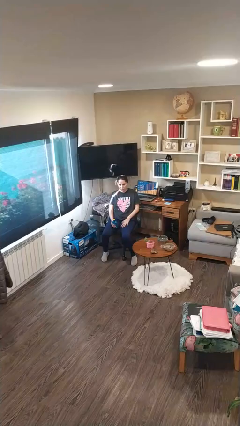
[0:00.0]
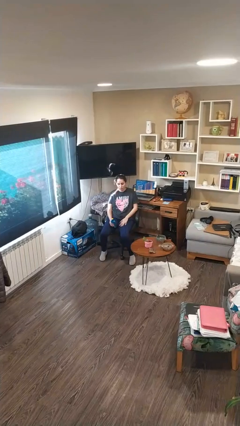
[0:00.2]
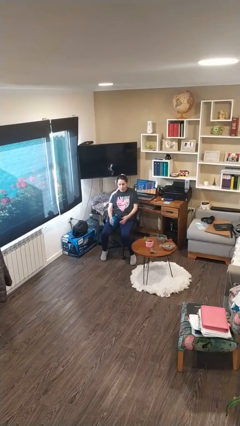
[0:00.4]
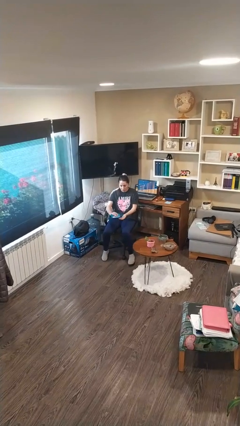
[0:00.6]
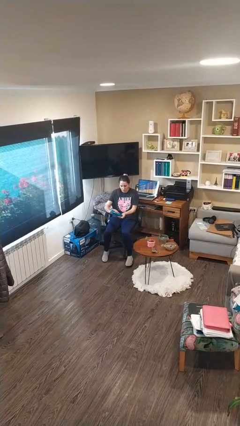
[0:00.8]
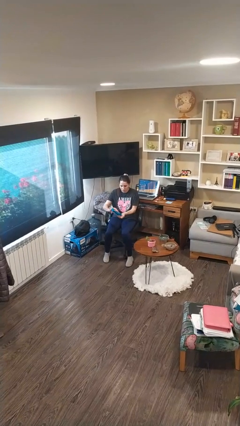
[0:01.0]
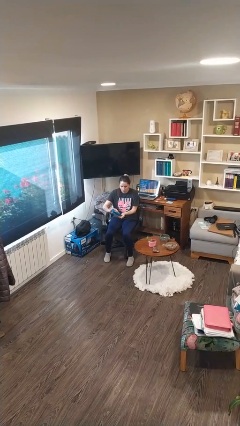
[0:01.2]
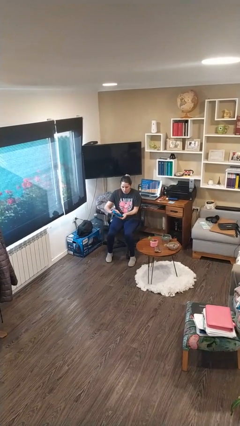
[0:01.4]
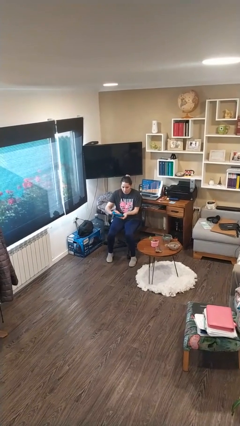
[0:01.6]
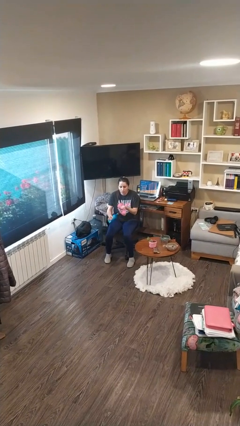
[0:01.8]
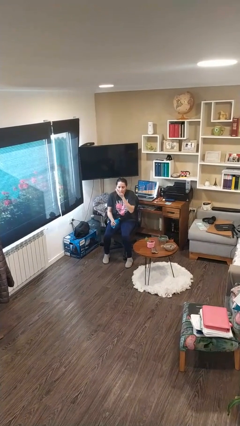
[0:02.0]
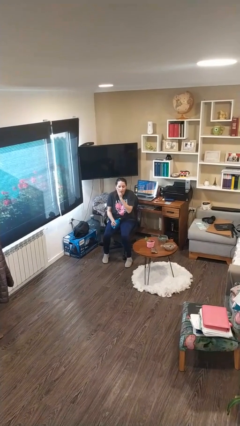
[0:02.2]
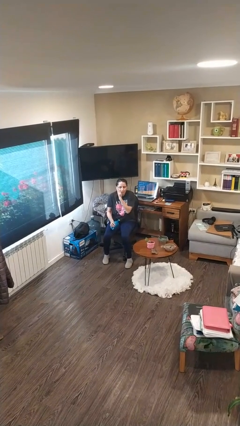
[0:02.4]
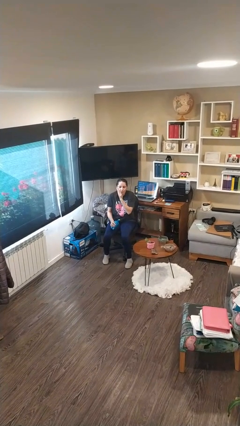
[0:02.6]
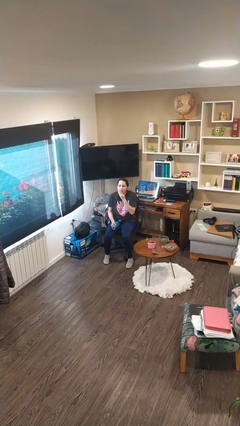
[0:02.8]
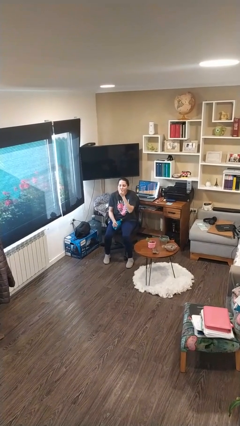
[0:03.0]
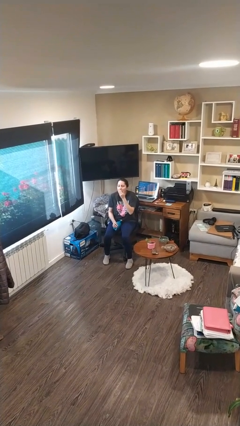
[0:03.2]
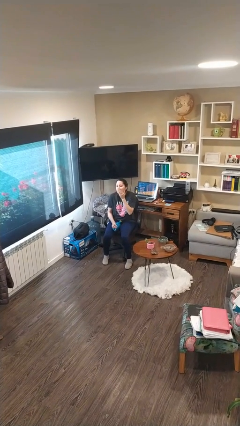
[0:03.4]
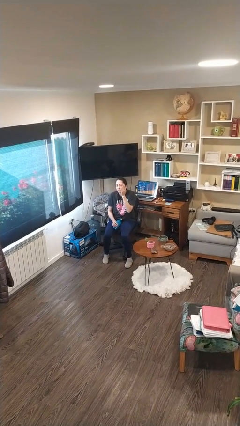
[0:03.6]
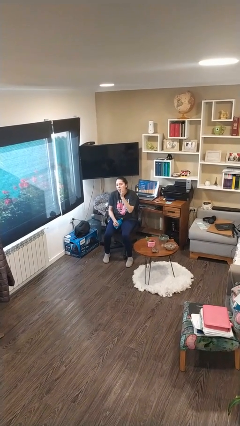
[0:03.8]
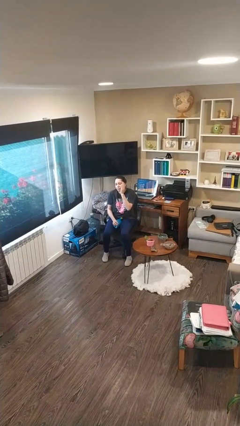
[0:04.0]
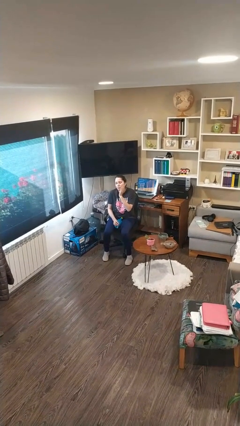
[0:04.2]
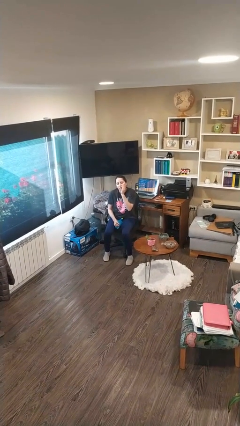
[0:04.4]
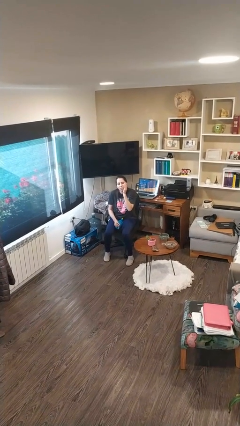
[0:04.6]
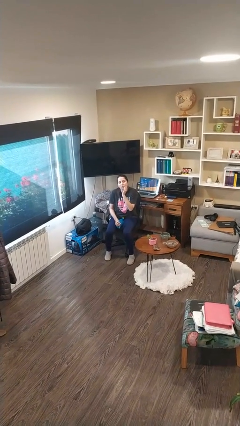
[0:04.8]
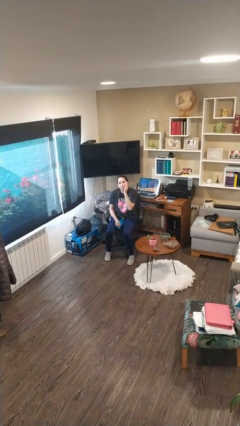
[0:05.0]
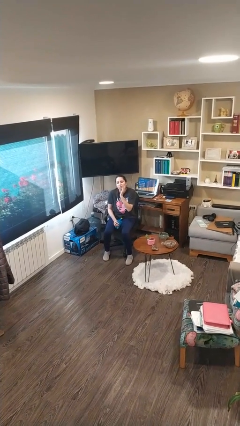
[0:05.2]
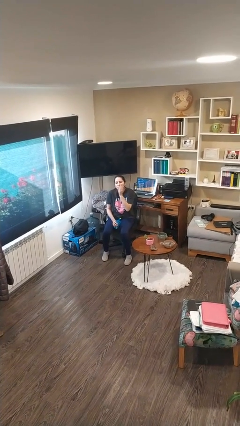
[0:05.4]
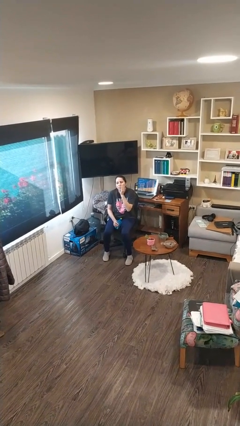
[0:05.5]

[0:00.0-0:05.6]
person applies facial moisturizer

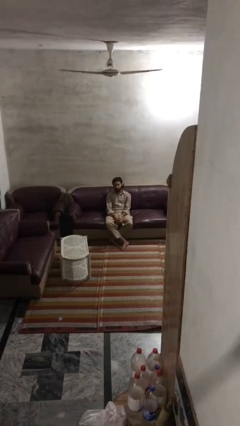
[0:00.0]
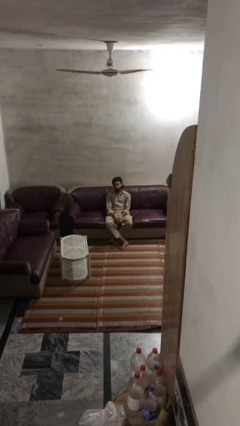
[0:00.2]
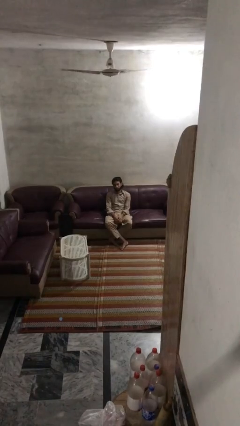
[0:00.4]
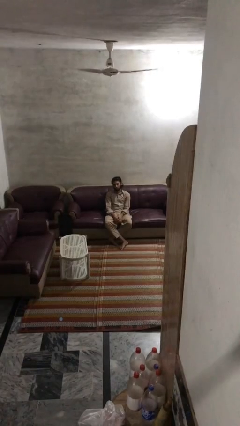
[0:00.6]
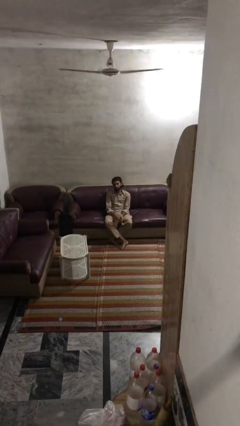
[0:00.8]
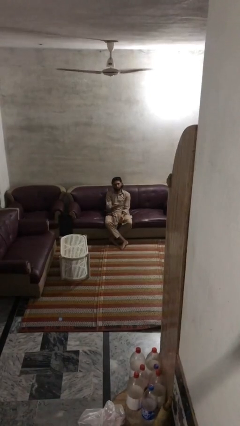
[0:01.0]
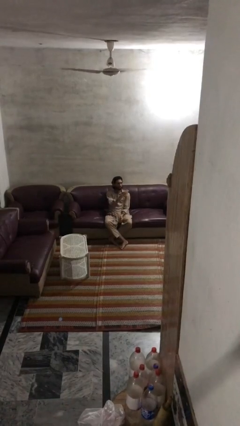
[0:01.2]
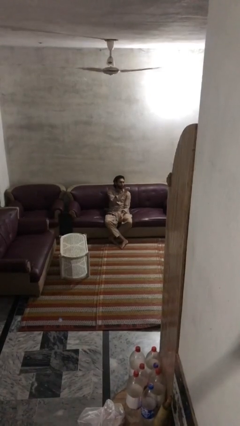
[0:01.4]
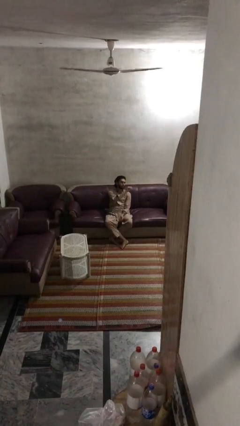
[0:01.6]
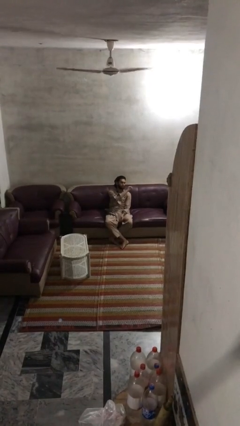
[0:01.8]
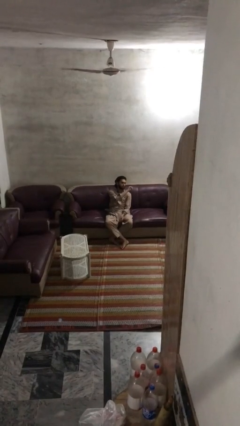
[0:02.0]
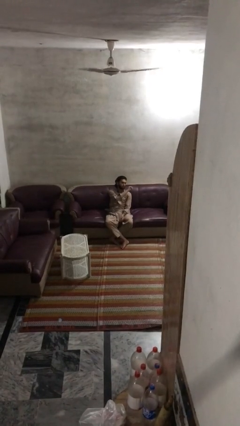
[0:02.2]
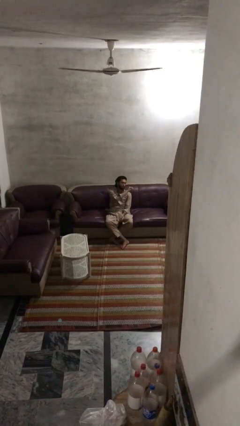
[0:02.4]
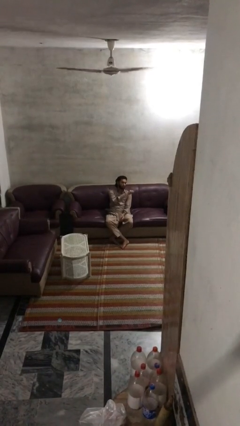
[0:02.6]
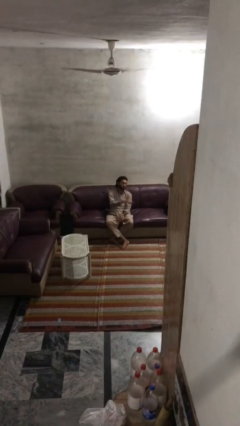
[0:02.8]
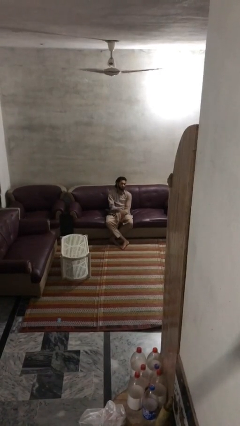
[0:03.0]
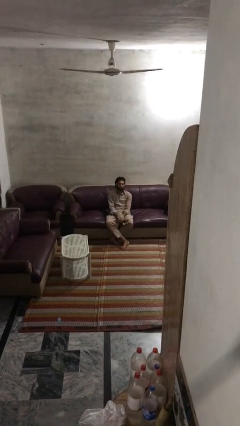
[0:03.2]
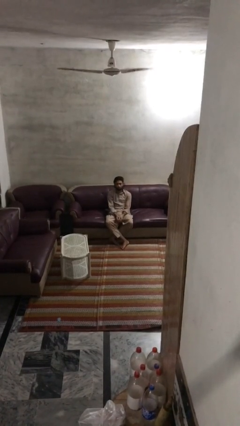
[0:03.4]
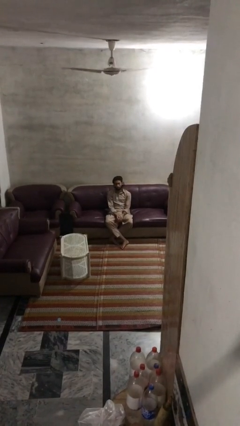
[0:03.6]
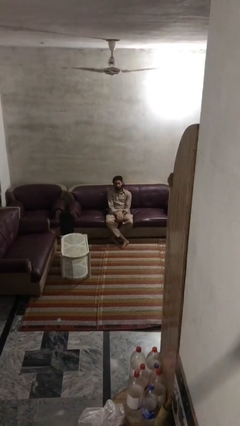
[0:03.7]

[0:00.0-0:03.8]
person gestures behind me

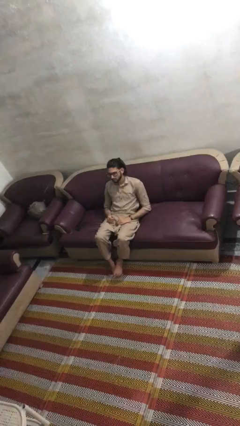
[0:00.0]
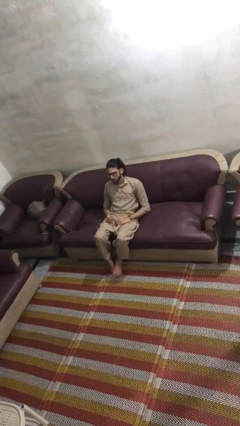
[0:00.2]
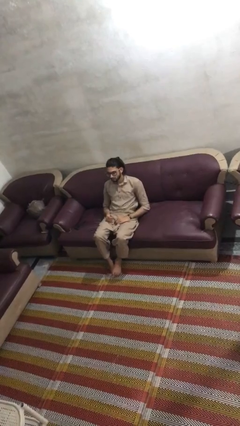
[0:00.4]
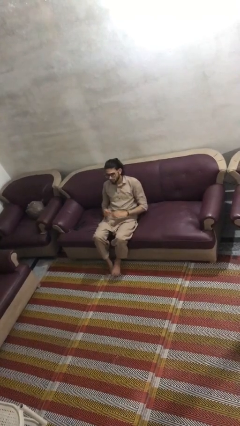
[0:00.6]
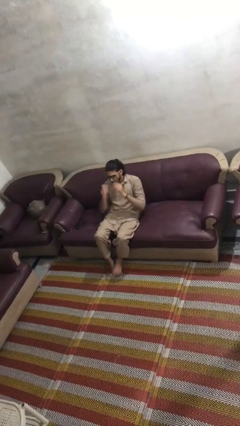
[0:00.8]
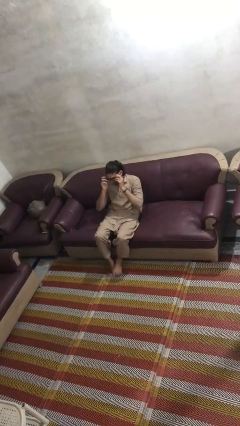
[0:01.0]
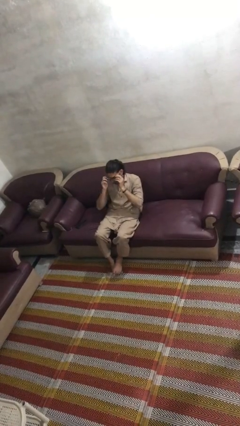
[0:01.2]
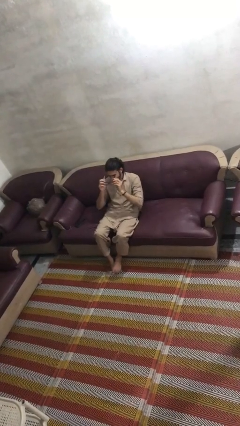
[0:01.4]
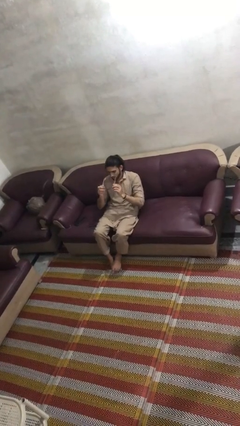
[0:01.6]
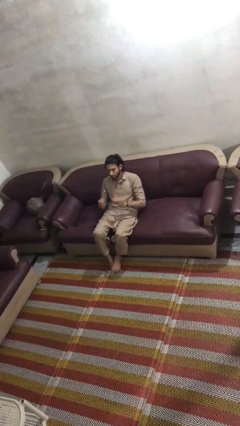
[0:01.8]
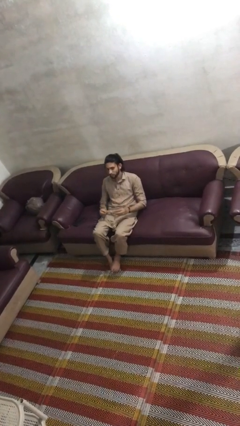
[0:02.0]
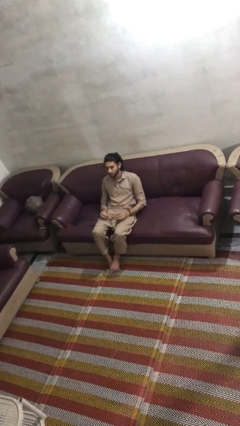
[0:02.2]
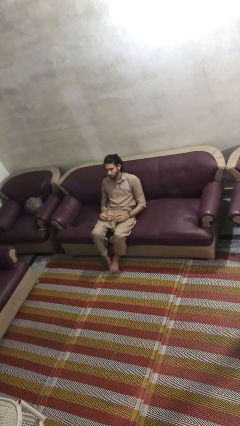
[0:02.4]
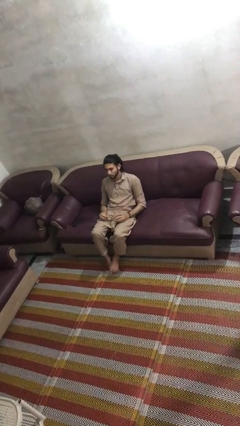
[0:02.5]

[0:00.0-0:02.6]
person takes off glasses

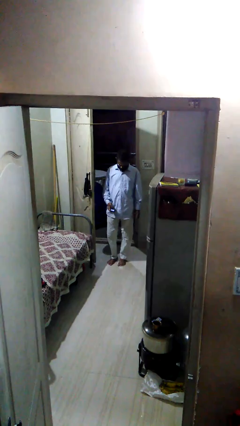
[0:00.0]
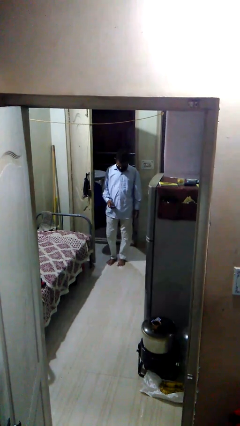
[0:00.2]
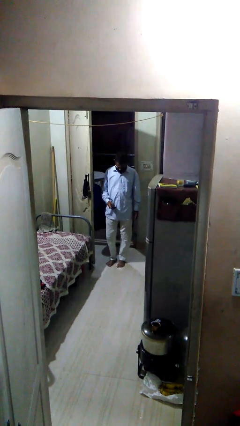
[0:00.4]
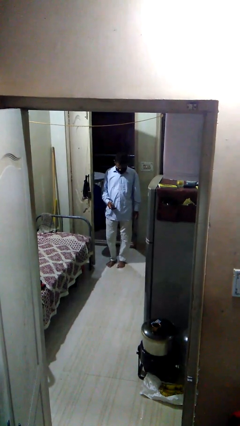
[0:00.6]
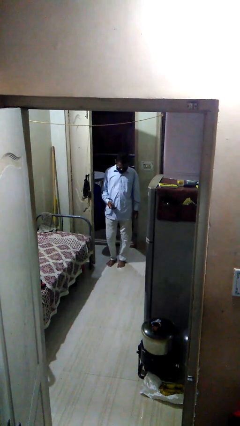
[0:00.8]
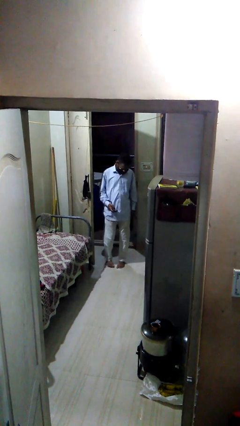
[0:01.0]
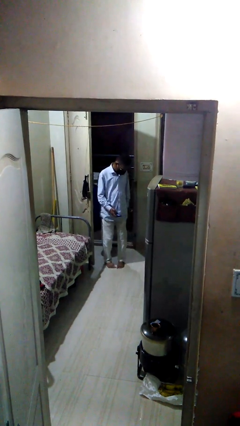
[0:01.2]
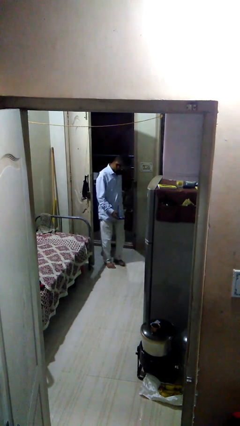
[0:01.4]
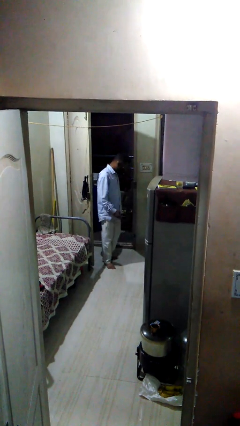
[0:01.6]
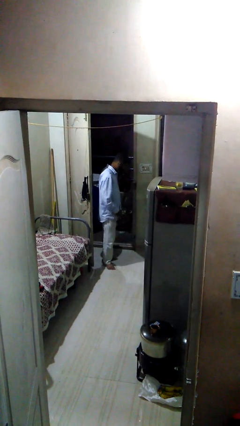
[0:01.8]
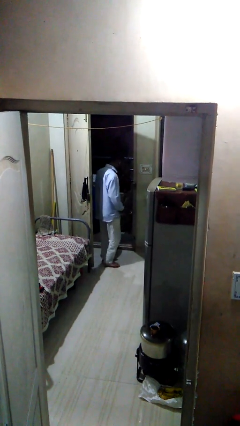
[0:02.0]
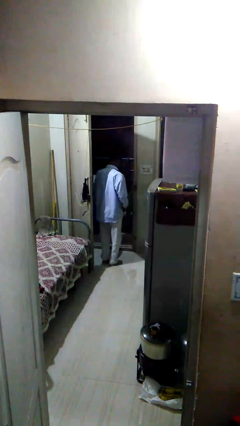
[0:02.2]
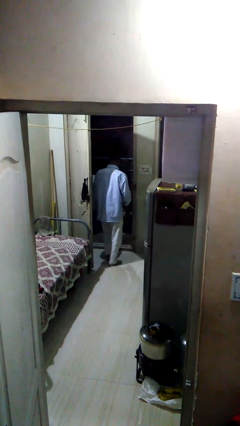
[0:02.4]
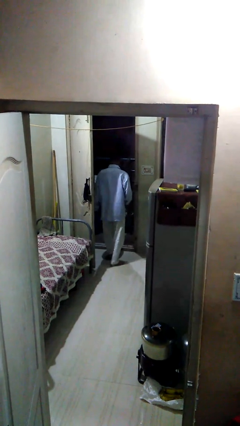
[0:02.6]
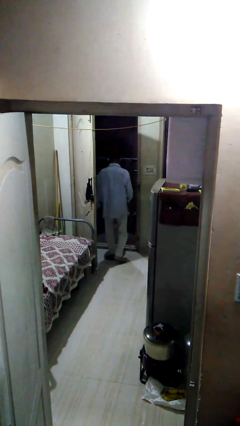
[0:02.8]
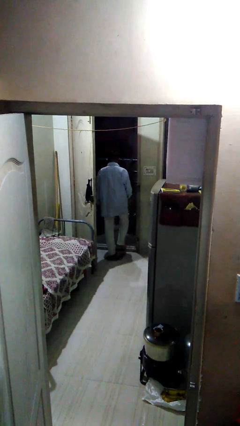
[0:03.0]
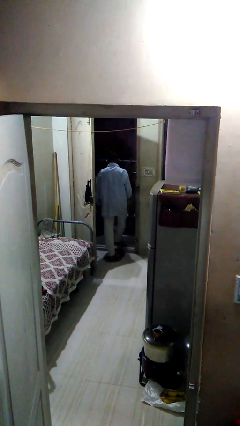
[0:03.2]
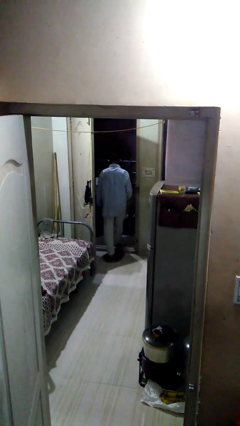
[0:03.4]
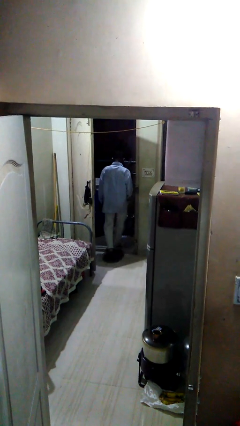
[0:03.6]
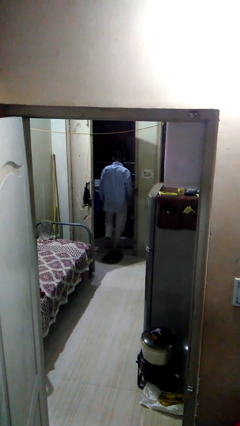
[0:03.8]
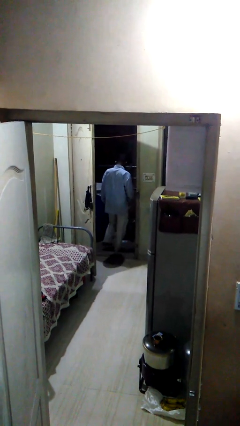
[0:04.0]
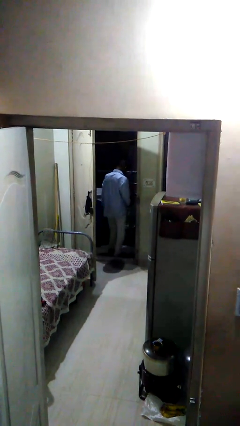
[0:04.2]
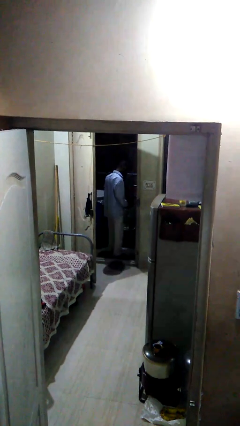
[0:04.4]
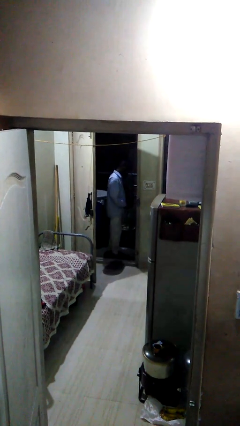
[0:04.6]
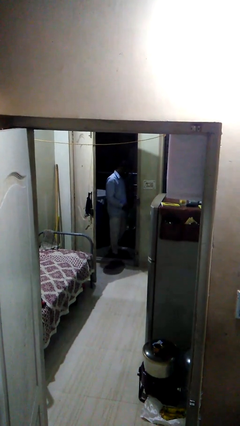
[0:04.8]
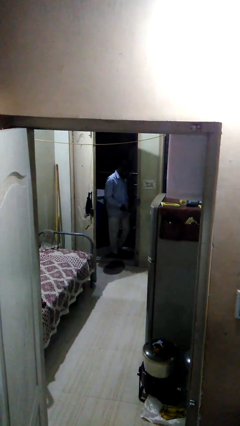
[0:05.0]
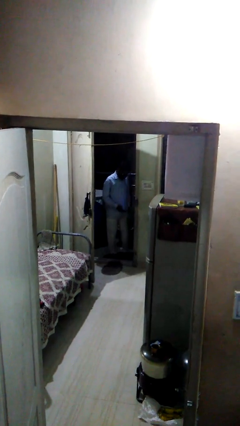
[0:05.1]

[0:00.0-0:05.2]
person exits scene through structure

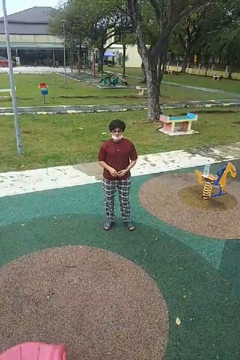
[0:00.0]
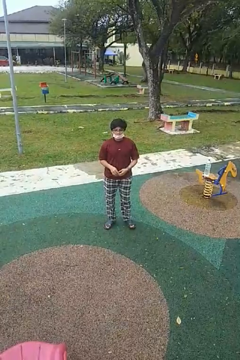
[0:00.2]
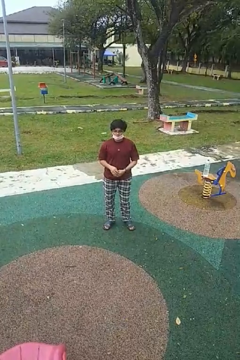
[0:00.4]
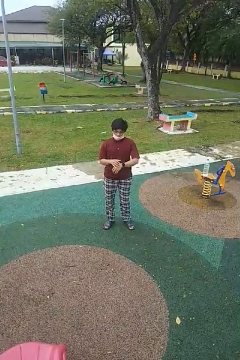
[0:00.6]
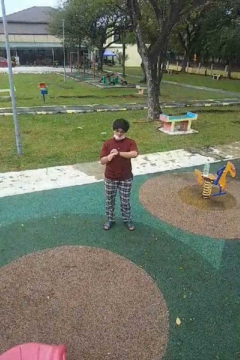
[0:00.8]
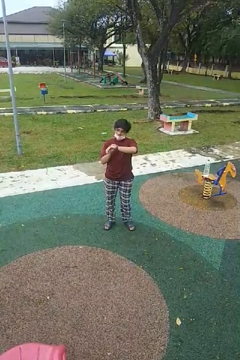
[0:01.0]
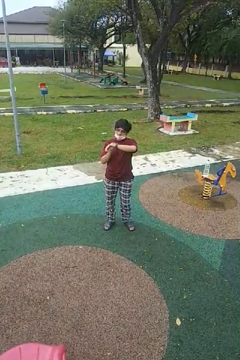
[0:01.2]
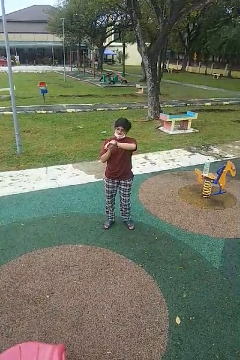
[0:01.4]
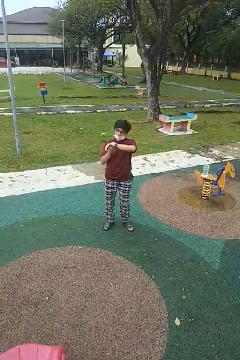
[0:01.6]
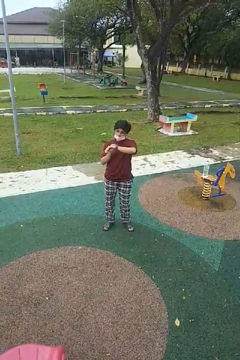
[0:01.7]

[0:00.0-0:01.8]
person looks at wristwatch
